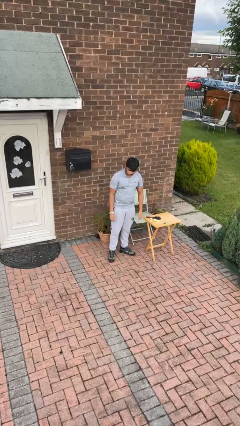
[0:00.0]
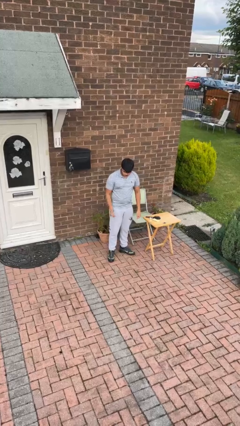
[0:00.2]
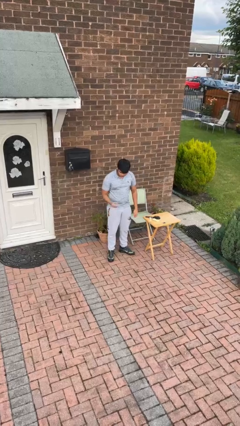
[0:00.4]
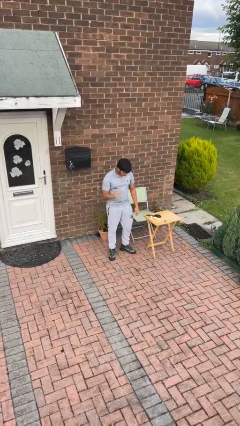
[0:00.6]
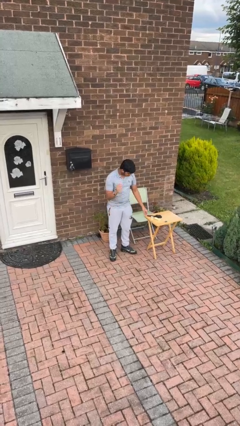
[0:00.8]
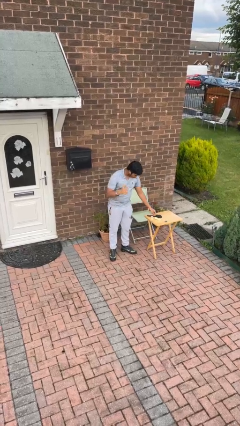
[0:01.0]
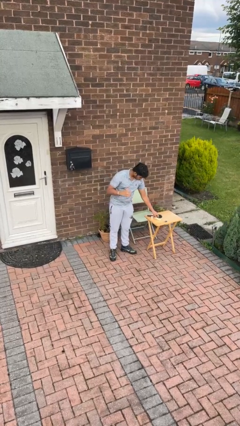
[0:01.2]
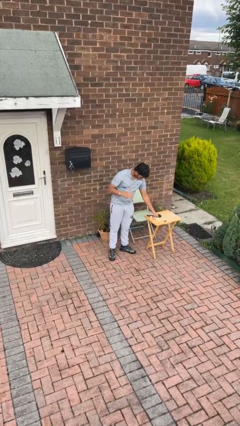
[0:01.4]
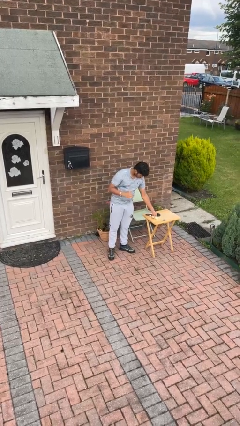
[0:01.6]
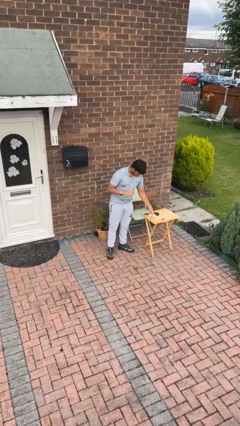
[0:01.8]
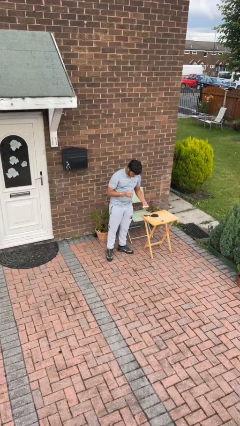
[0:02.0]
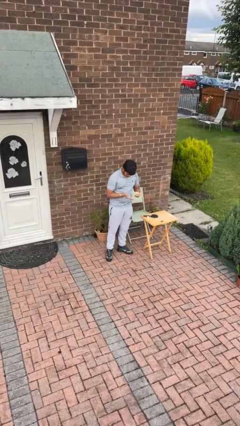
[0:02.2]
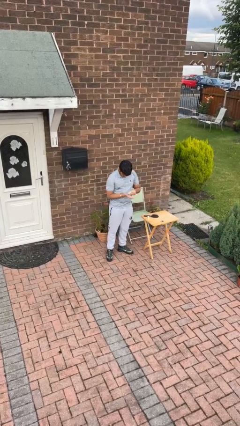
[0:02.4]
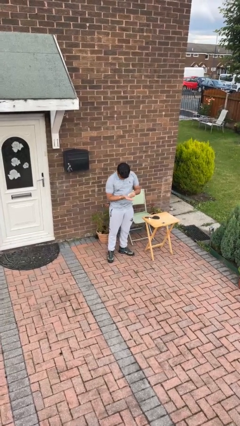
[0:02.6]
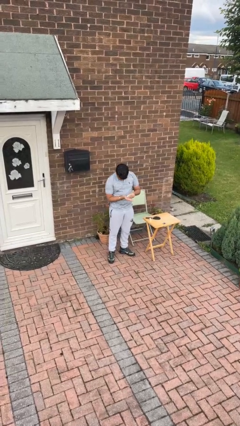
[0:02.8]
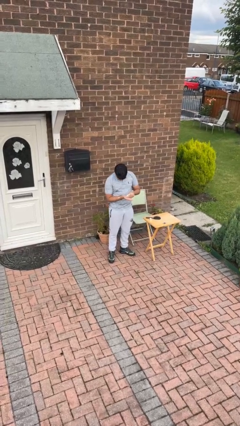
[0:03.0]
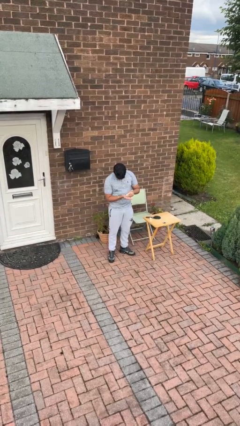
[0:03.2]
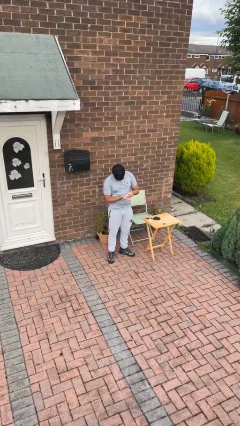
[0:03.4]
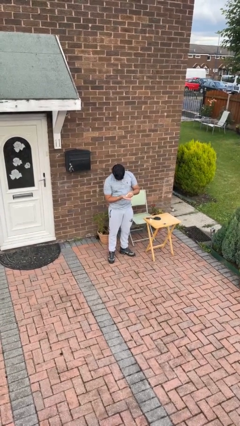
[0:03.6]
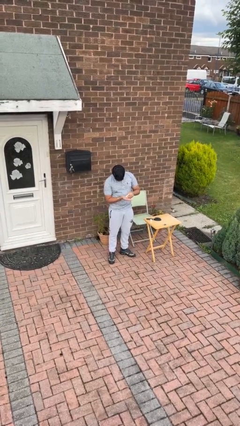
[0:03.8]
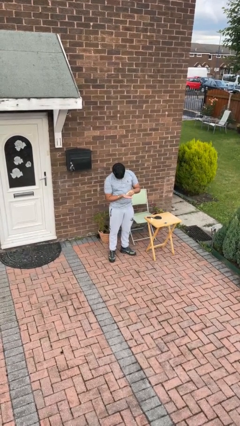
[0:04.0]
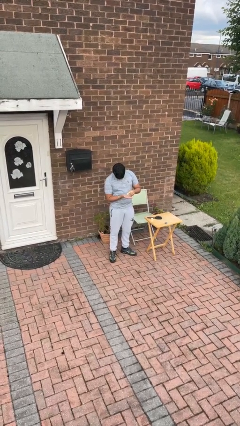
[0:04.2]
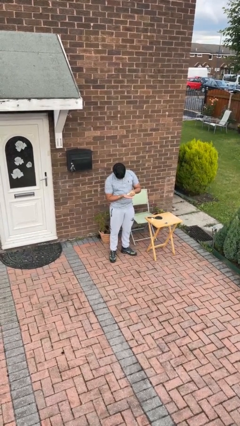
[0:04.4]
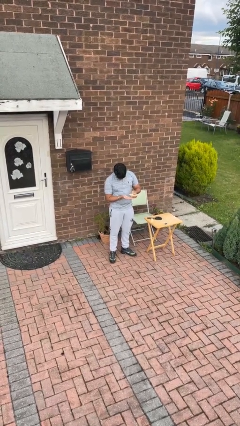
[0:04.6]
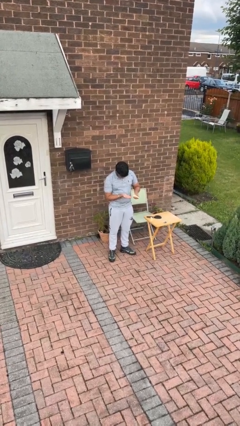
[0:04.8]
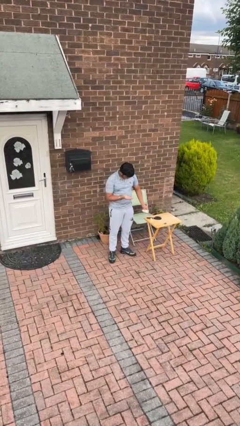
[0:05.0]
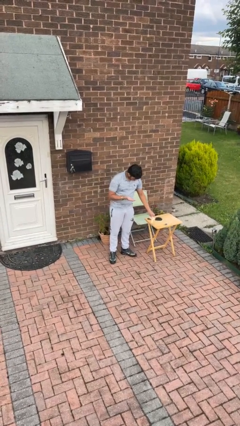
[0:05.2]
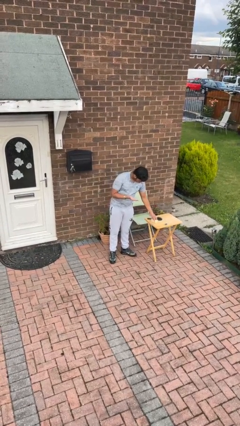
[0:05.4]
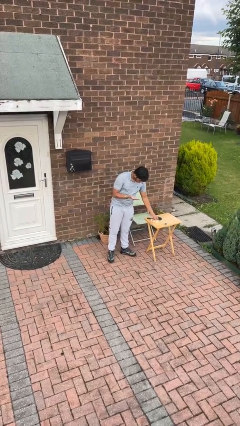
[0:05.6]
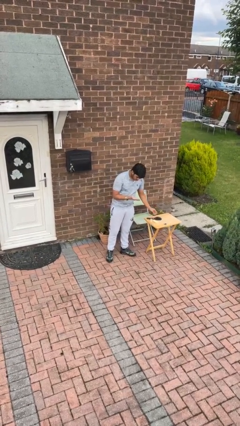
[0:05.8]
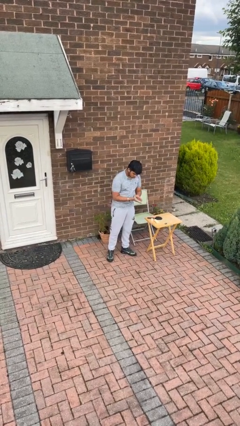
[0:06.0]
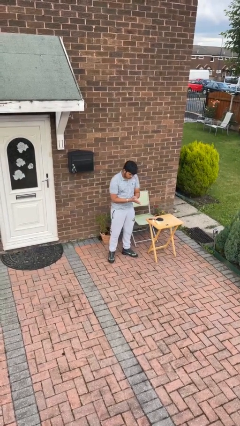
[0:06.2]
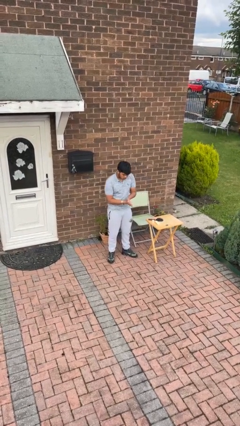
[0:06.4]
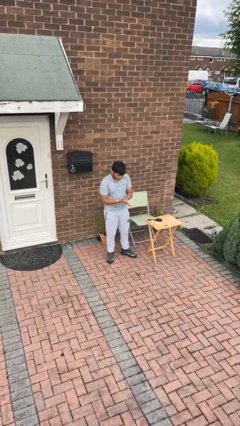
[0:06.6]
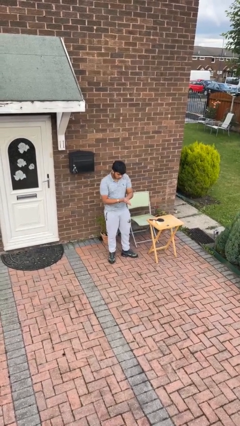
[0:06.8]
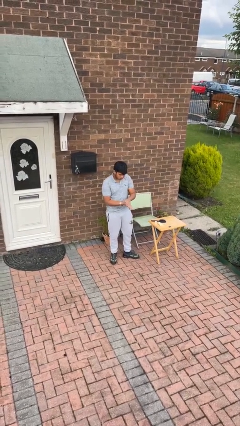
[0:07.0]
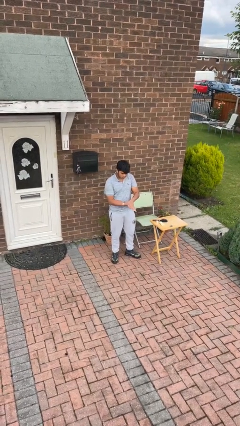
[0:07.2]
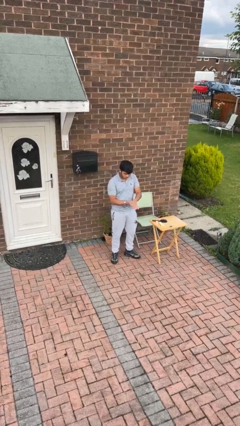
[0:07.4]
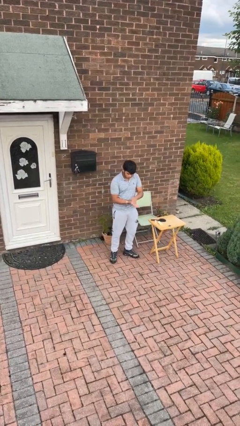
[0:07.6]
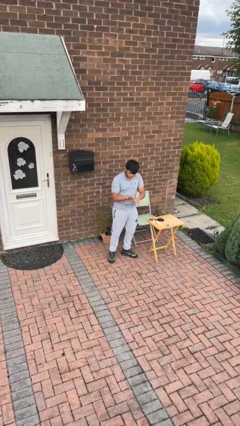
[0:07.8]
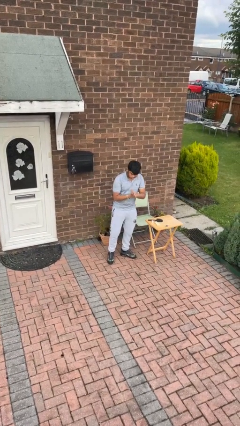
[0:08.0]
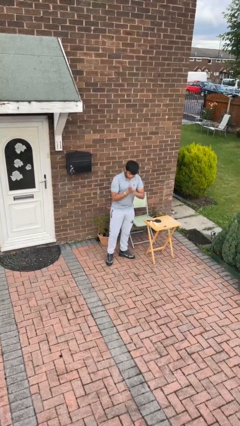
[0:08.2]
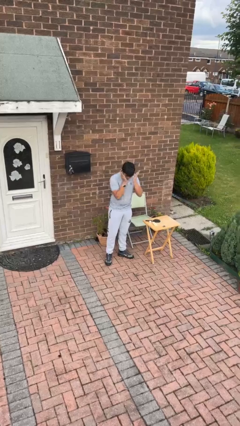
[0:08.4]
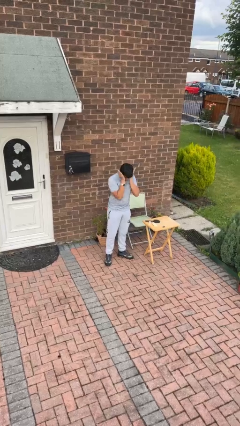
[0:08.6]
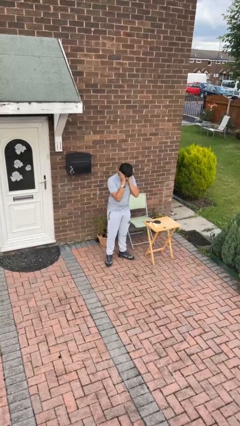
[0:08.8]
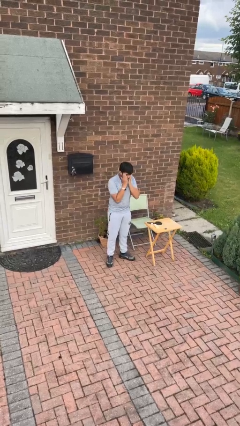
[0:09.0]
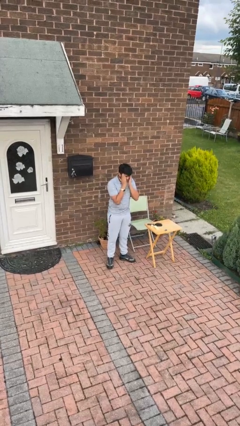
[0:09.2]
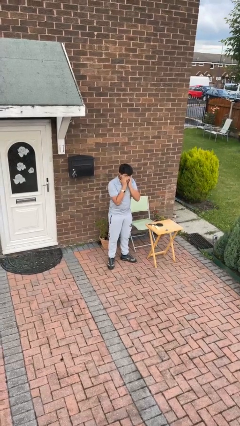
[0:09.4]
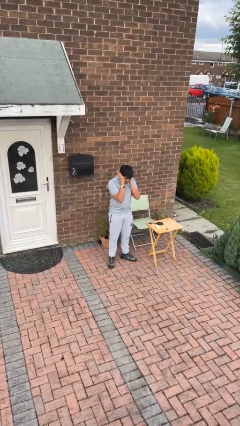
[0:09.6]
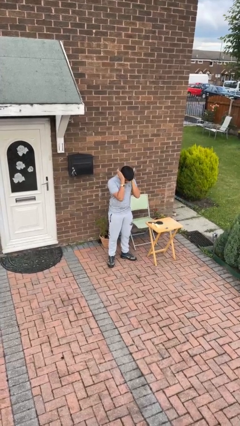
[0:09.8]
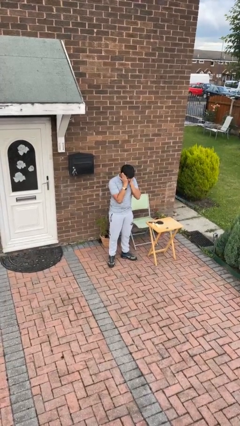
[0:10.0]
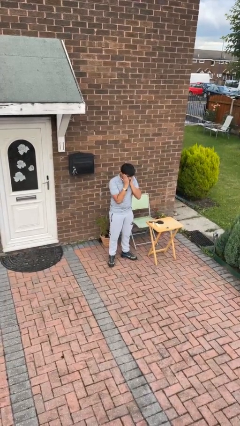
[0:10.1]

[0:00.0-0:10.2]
person applies facial moisturizer

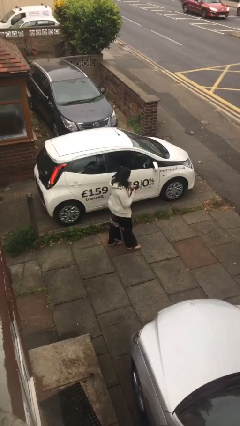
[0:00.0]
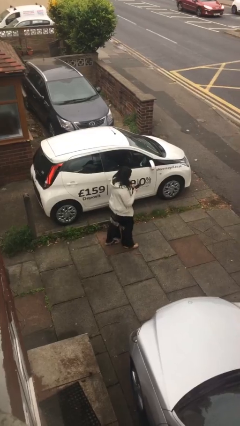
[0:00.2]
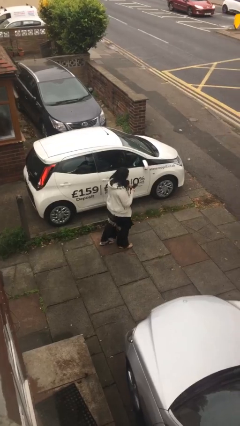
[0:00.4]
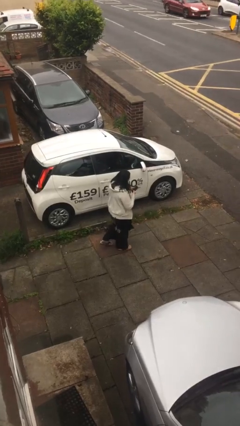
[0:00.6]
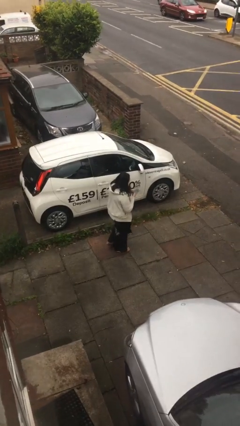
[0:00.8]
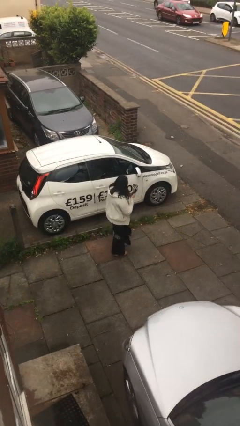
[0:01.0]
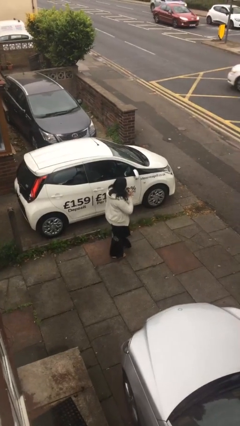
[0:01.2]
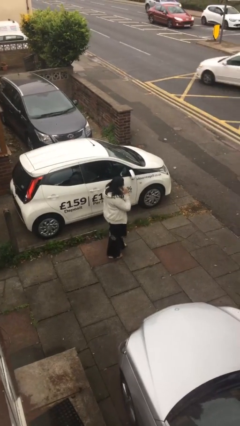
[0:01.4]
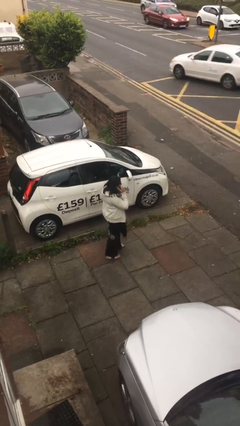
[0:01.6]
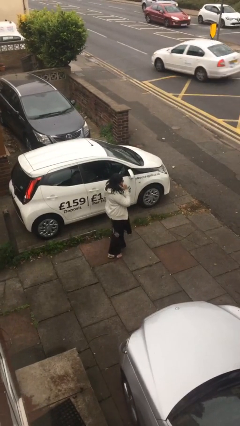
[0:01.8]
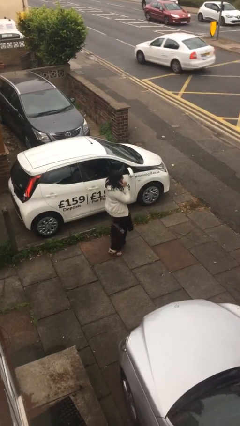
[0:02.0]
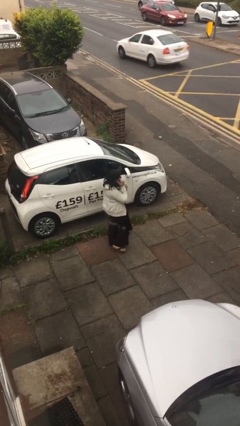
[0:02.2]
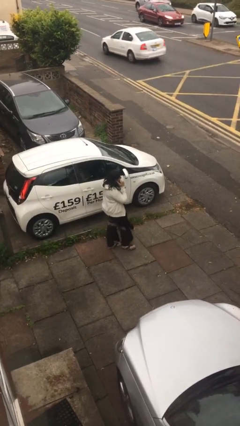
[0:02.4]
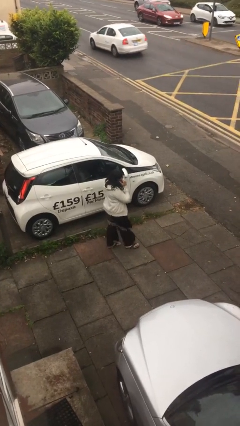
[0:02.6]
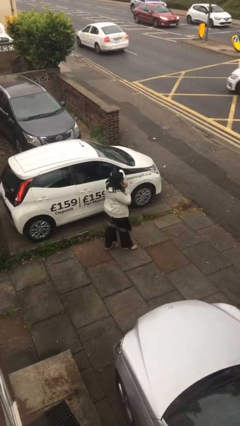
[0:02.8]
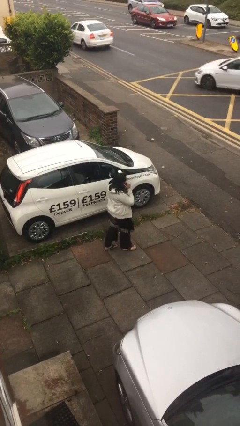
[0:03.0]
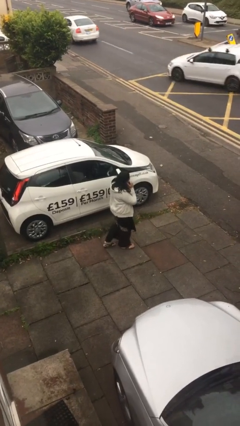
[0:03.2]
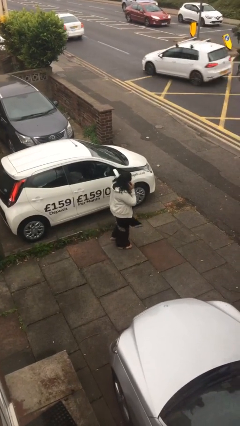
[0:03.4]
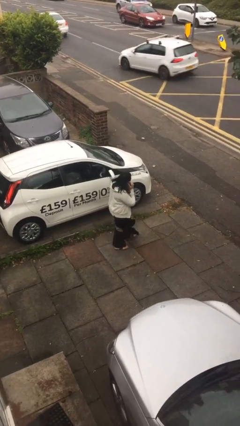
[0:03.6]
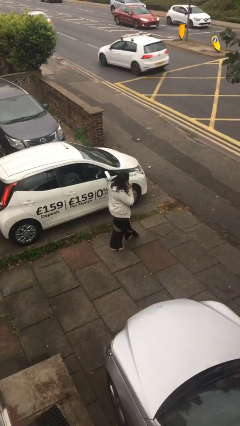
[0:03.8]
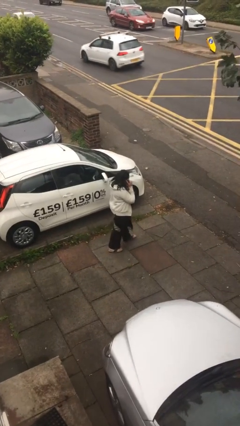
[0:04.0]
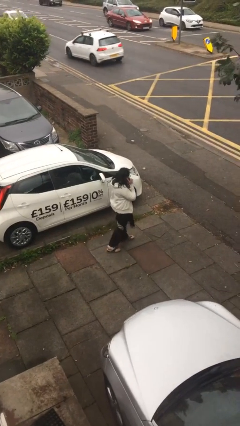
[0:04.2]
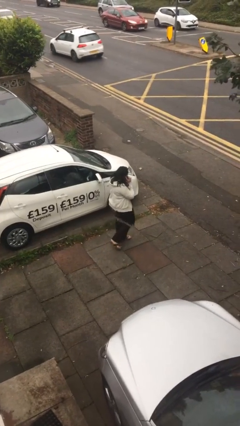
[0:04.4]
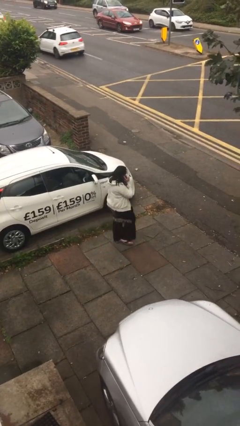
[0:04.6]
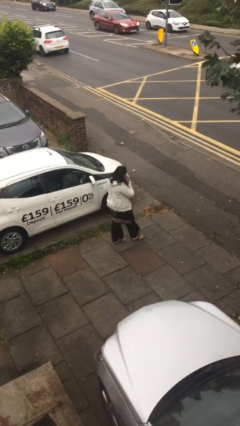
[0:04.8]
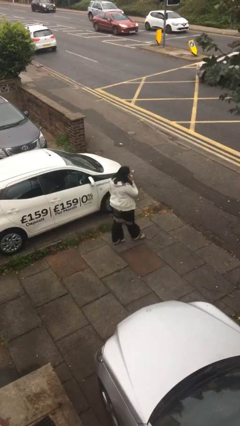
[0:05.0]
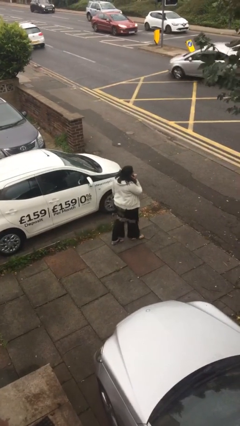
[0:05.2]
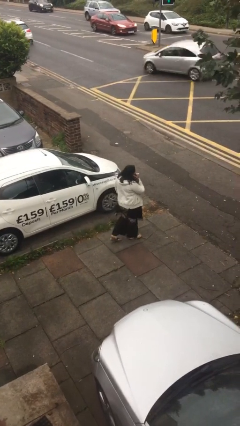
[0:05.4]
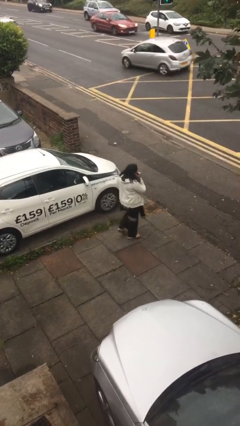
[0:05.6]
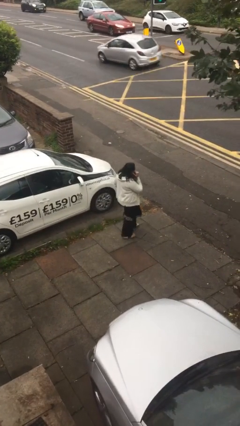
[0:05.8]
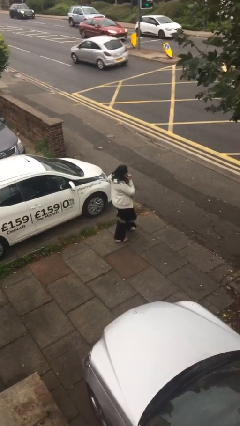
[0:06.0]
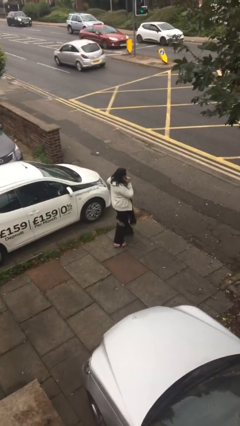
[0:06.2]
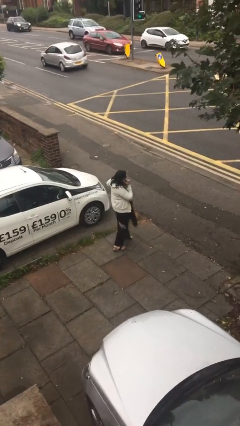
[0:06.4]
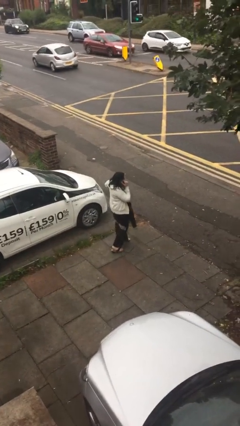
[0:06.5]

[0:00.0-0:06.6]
person talks on phone

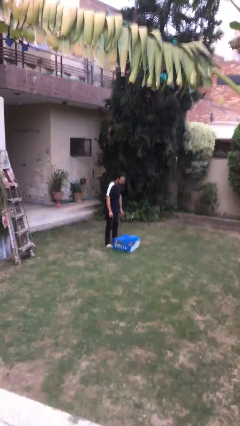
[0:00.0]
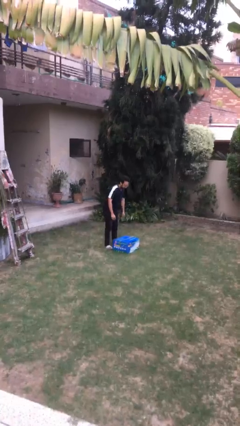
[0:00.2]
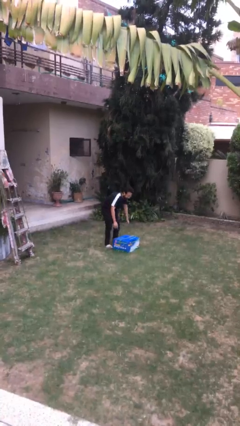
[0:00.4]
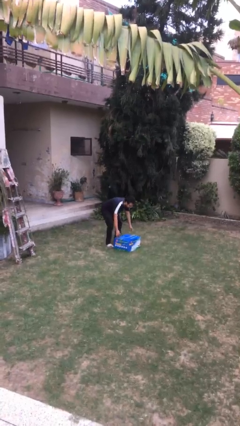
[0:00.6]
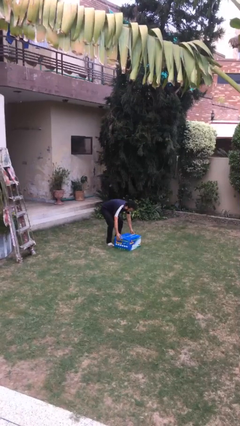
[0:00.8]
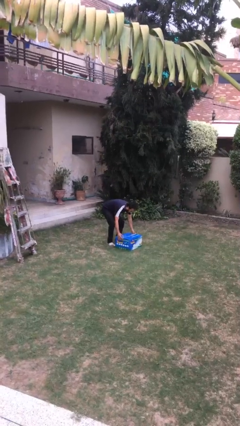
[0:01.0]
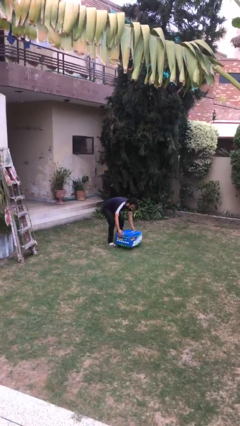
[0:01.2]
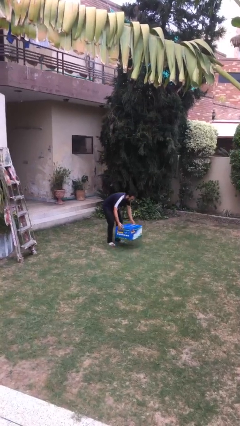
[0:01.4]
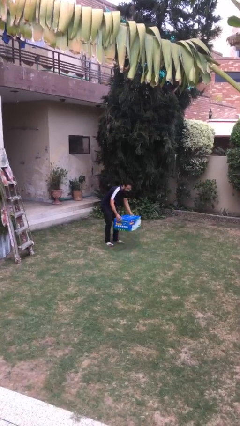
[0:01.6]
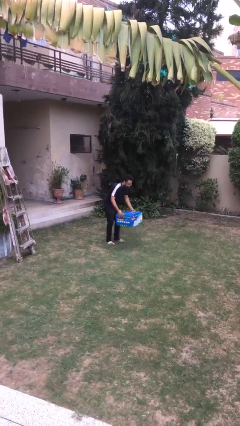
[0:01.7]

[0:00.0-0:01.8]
person picks up object from floor
